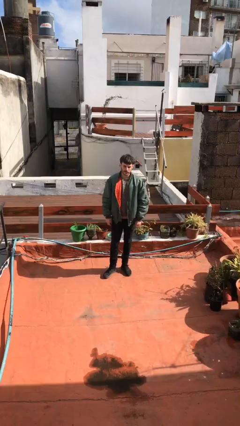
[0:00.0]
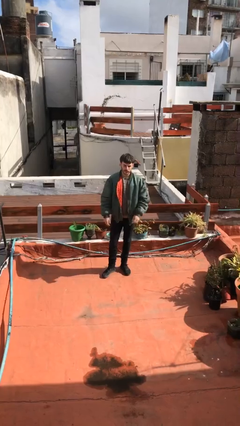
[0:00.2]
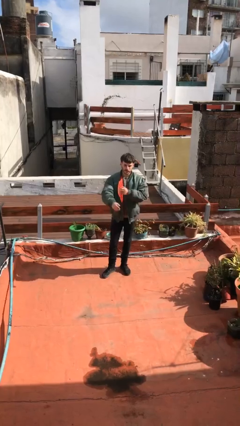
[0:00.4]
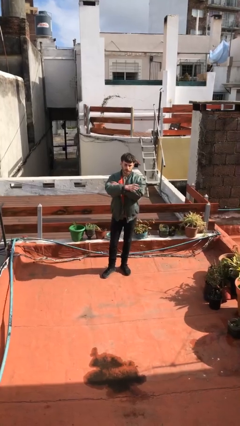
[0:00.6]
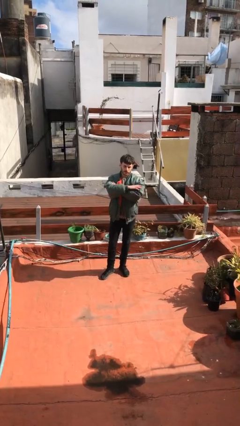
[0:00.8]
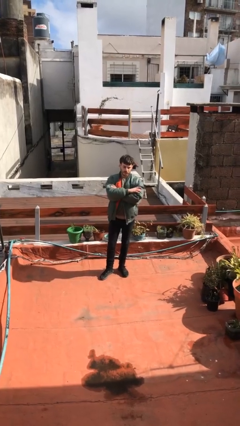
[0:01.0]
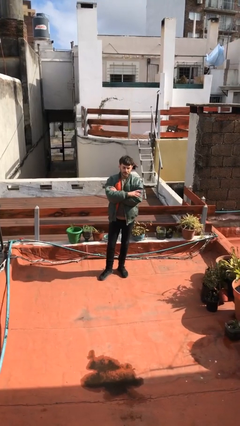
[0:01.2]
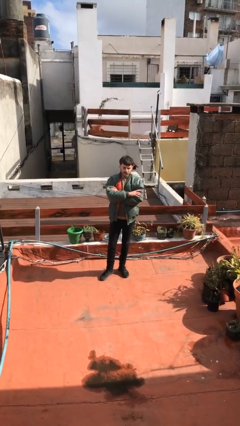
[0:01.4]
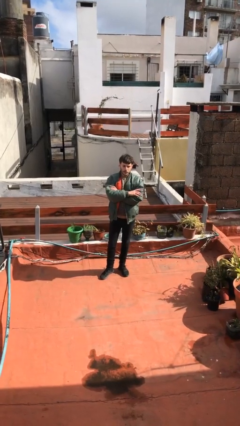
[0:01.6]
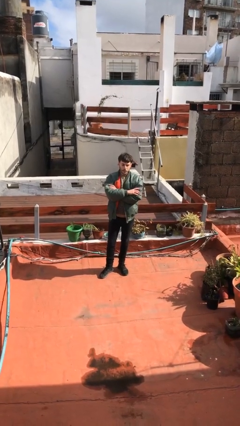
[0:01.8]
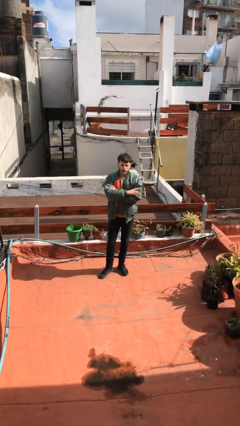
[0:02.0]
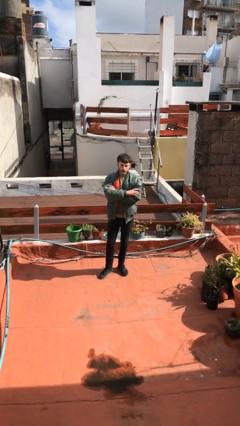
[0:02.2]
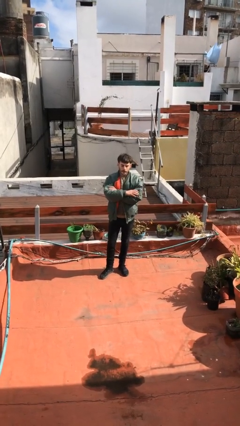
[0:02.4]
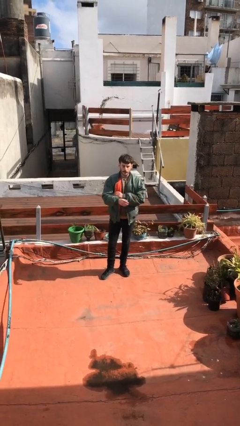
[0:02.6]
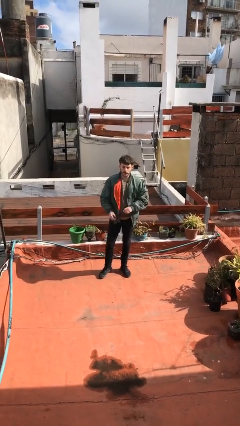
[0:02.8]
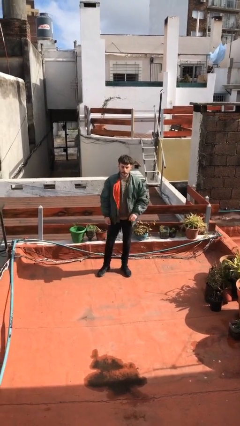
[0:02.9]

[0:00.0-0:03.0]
person crosses arms

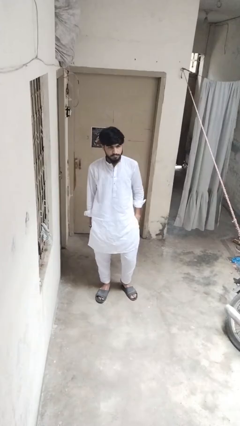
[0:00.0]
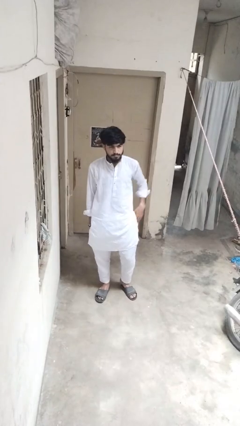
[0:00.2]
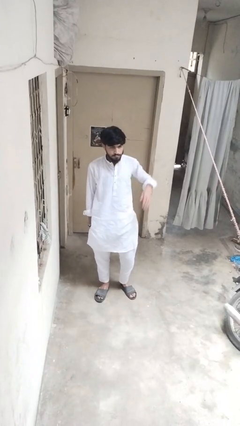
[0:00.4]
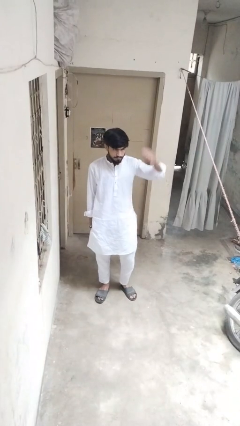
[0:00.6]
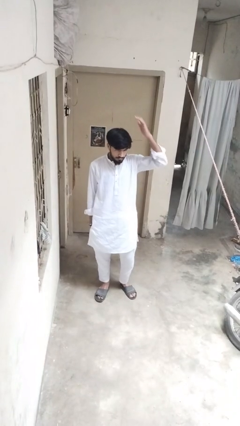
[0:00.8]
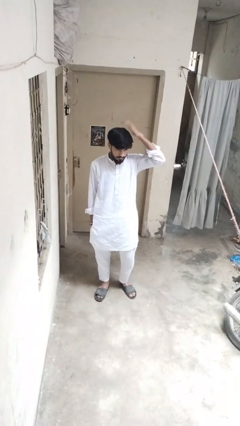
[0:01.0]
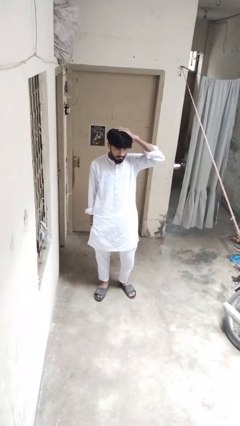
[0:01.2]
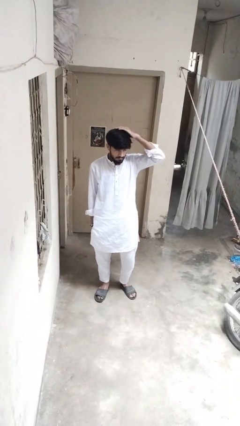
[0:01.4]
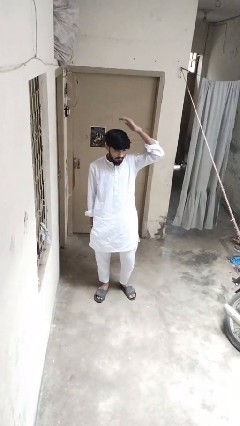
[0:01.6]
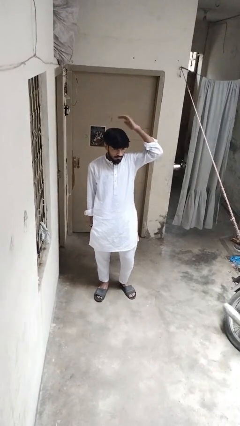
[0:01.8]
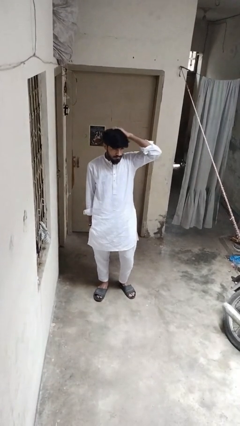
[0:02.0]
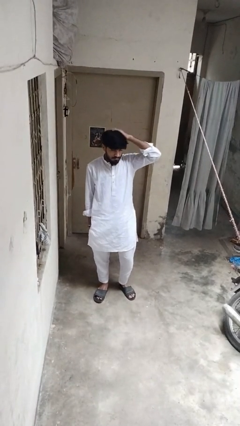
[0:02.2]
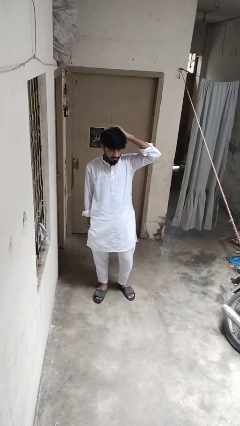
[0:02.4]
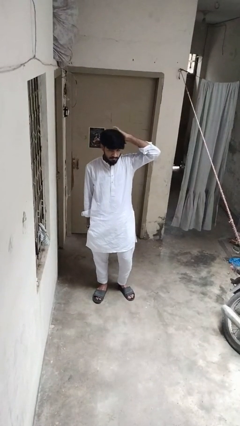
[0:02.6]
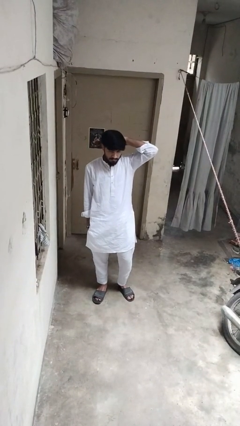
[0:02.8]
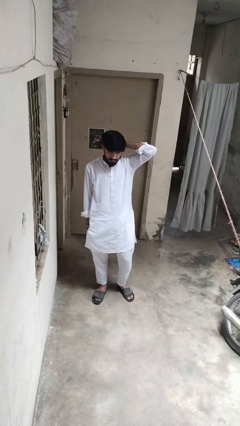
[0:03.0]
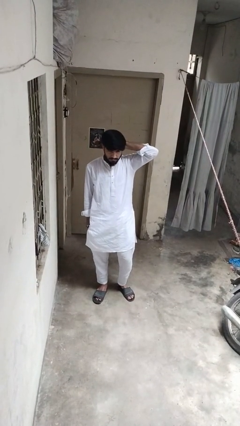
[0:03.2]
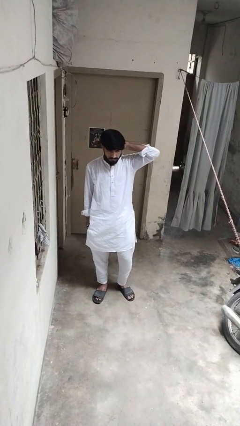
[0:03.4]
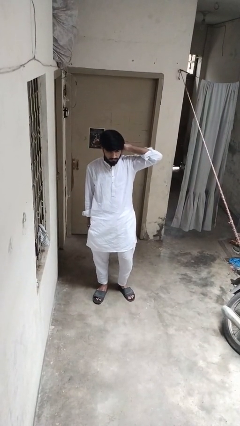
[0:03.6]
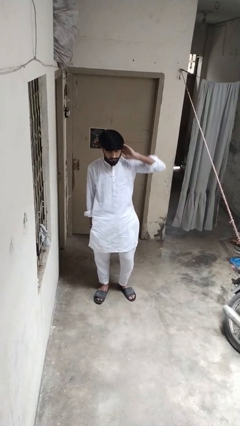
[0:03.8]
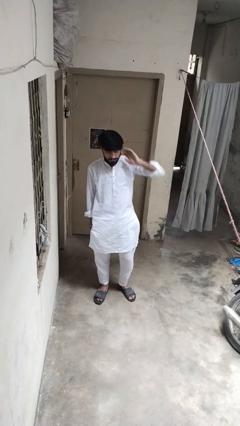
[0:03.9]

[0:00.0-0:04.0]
person pats head

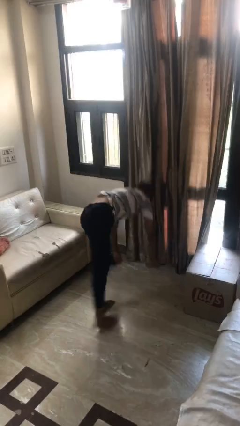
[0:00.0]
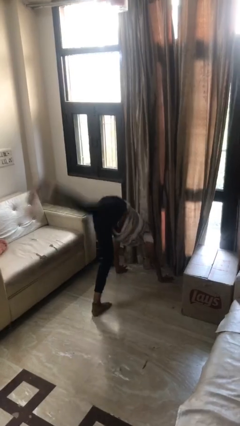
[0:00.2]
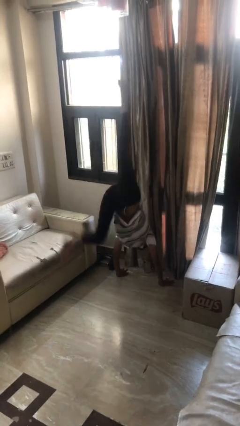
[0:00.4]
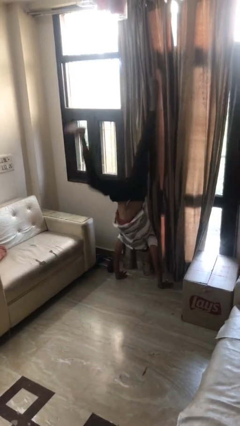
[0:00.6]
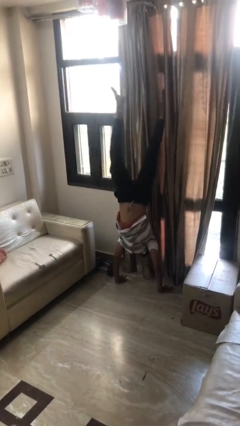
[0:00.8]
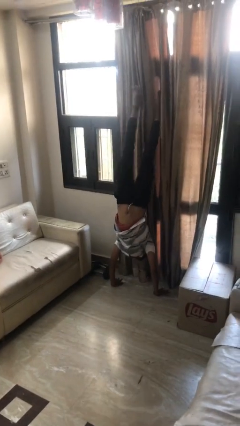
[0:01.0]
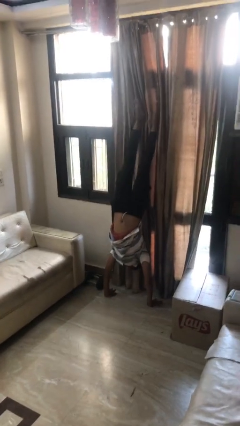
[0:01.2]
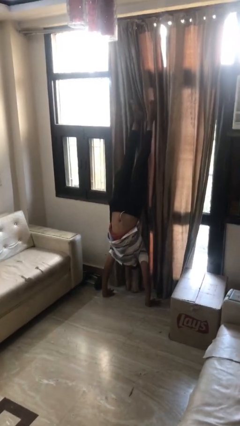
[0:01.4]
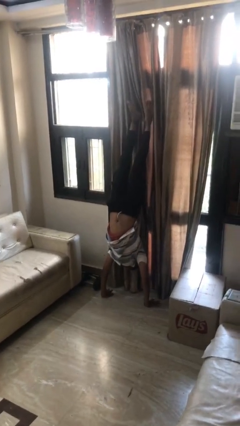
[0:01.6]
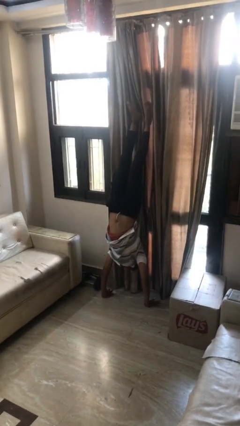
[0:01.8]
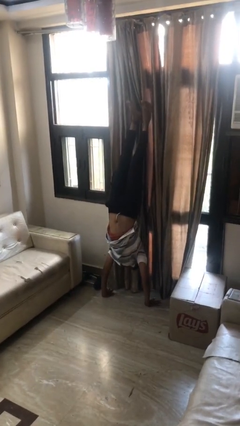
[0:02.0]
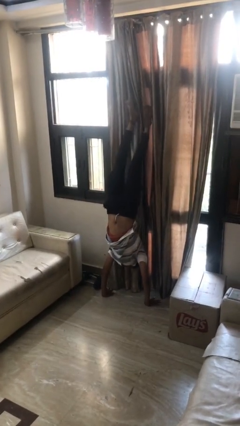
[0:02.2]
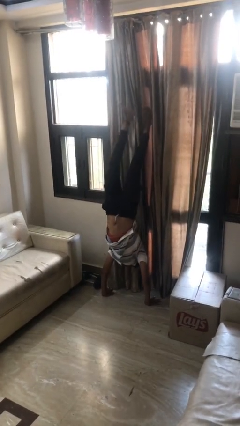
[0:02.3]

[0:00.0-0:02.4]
person handstand

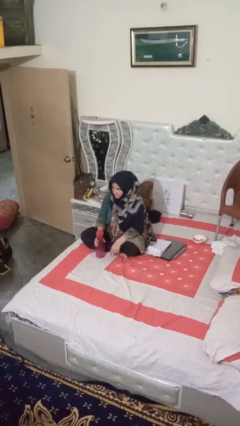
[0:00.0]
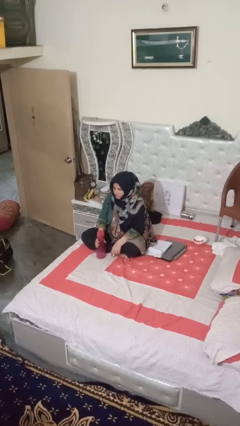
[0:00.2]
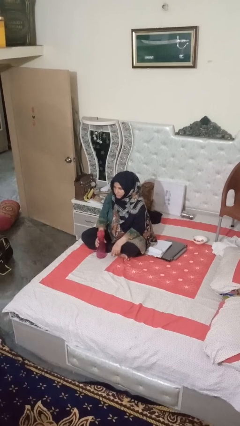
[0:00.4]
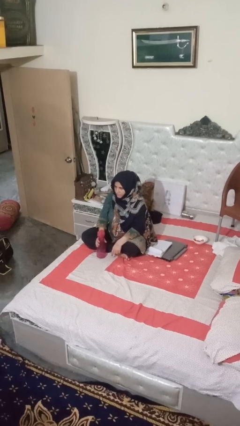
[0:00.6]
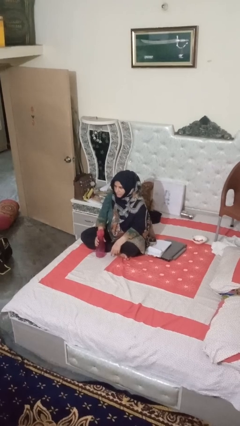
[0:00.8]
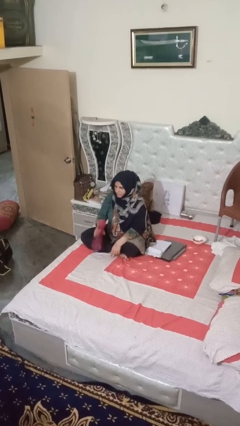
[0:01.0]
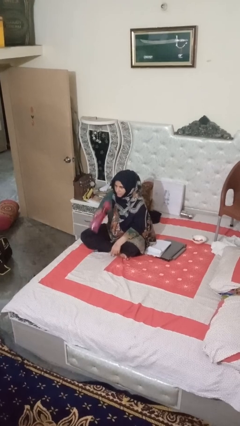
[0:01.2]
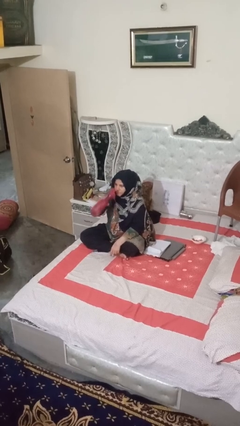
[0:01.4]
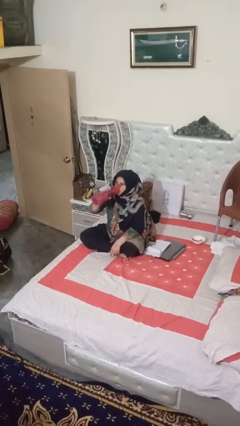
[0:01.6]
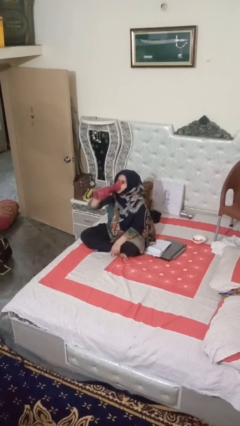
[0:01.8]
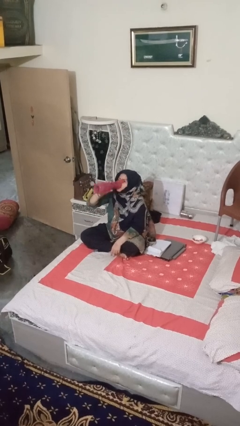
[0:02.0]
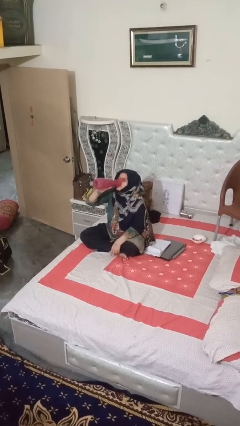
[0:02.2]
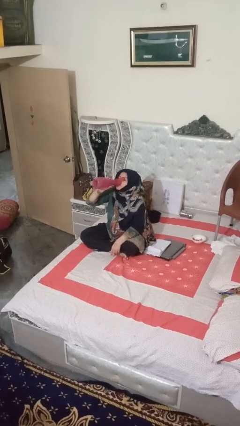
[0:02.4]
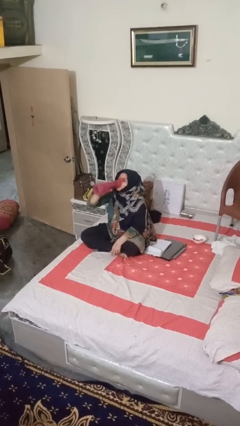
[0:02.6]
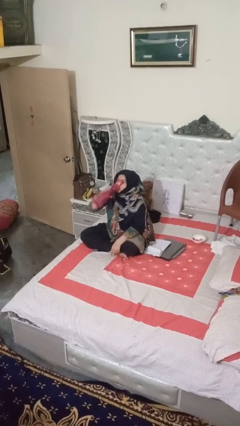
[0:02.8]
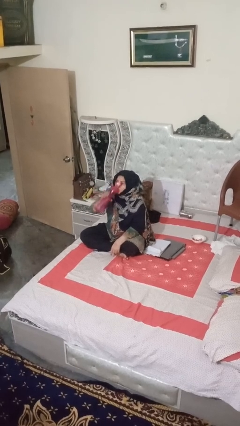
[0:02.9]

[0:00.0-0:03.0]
person drinks from bottle

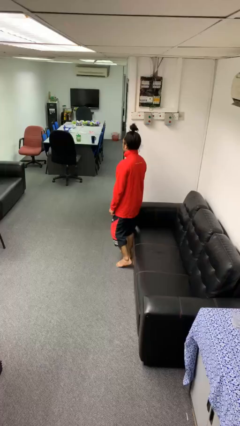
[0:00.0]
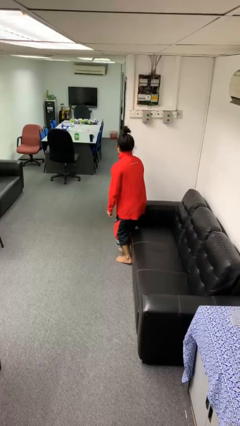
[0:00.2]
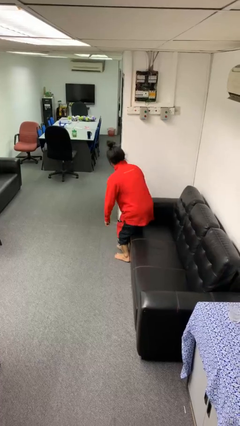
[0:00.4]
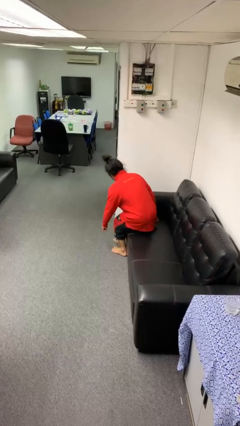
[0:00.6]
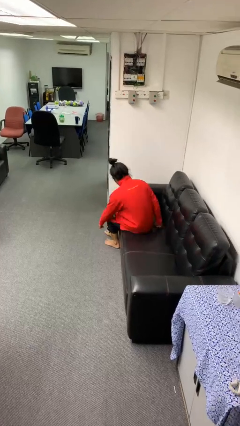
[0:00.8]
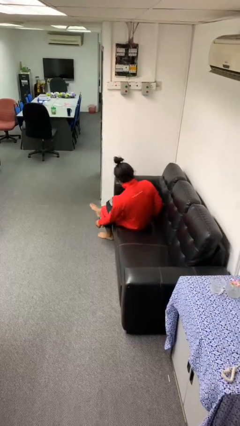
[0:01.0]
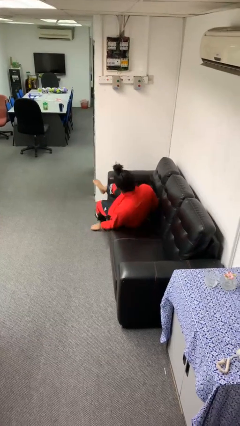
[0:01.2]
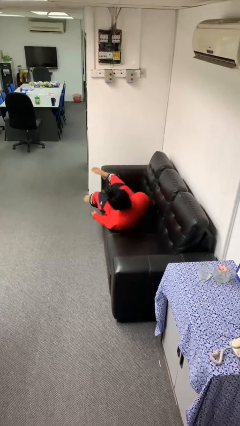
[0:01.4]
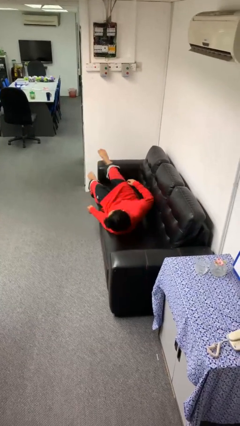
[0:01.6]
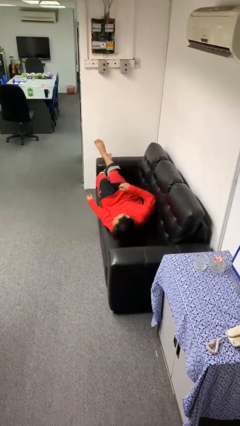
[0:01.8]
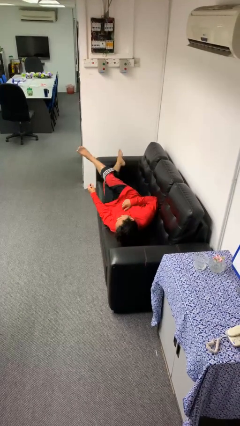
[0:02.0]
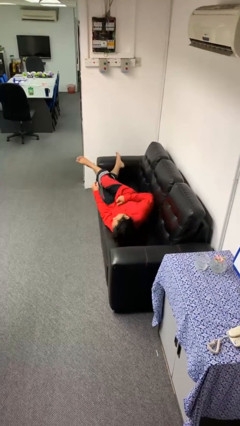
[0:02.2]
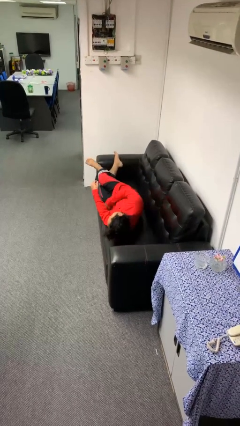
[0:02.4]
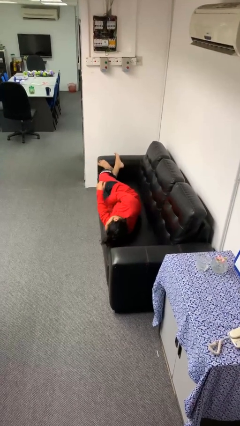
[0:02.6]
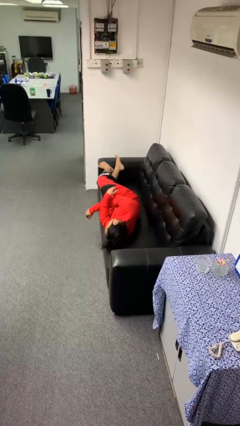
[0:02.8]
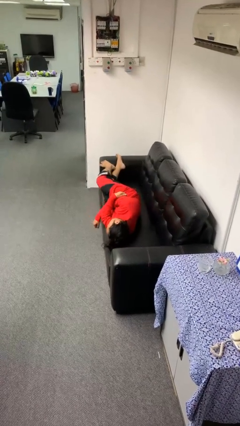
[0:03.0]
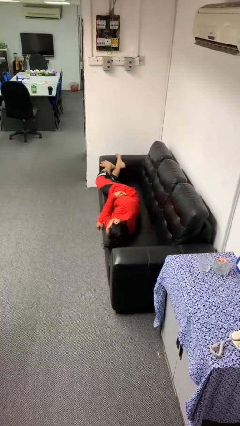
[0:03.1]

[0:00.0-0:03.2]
person lies down on couch

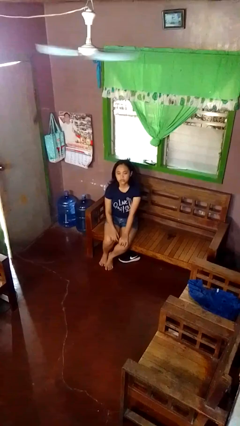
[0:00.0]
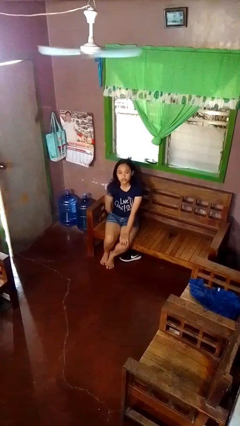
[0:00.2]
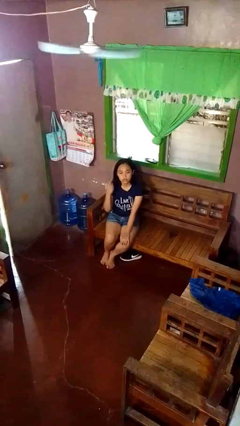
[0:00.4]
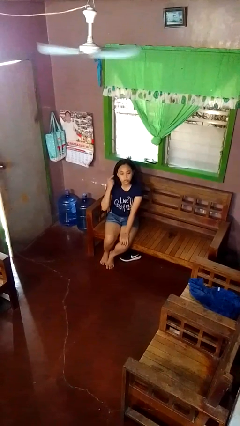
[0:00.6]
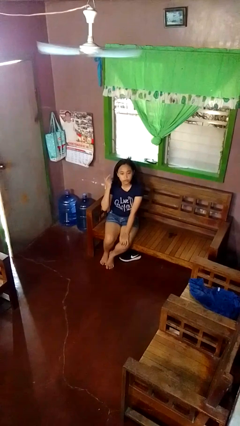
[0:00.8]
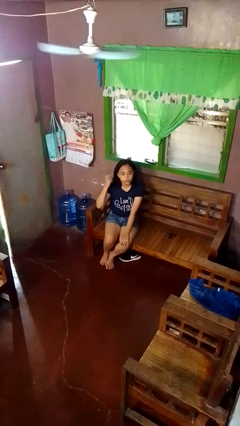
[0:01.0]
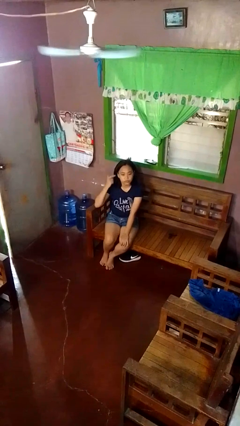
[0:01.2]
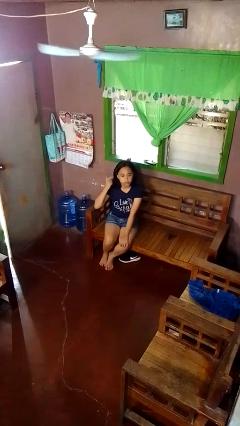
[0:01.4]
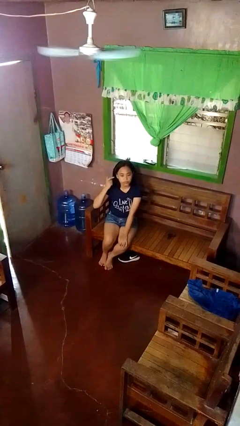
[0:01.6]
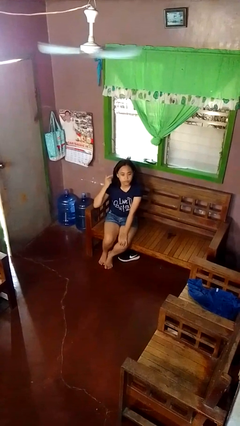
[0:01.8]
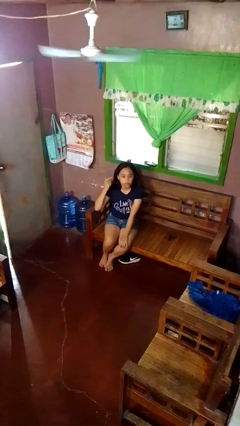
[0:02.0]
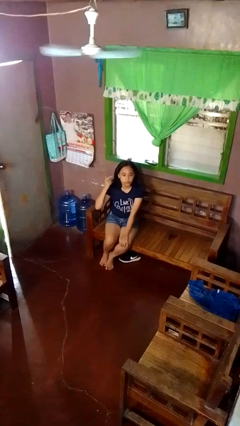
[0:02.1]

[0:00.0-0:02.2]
person gestures listen closely
